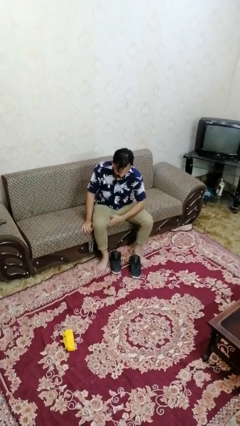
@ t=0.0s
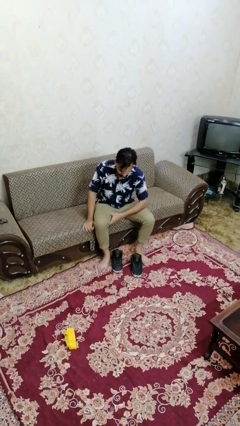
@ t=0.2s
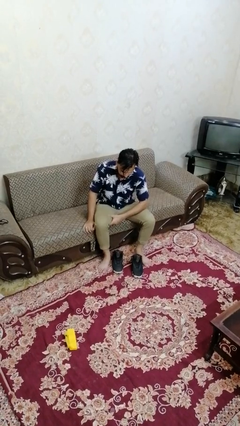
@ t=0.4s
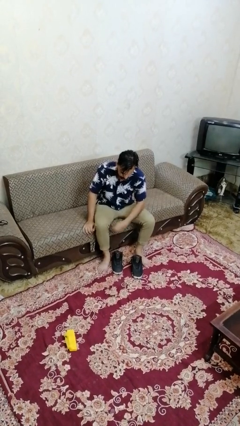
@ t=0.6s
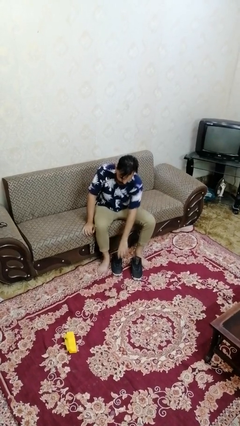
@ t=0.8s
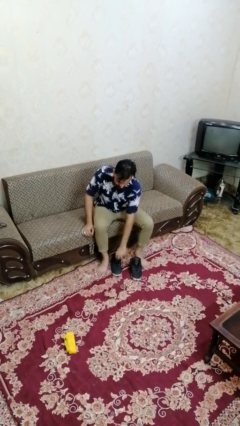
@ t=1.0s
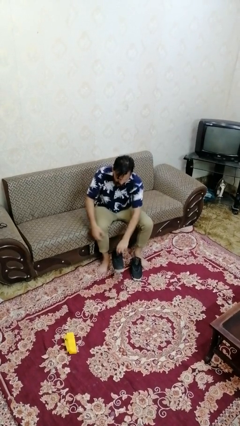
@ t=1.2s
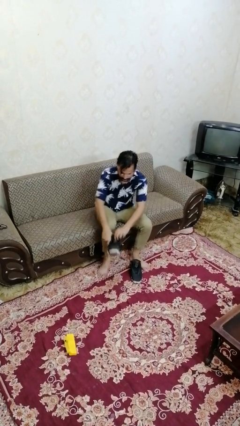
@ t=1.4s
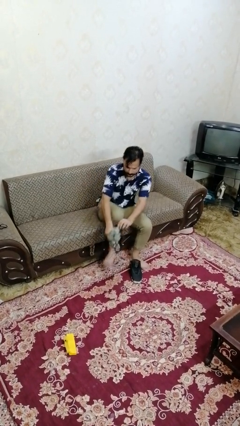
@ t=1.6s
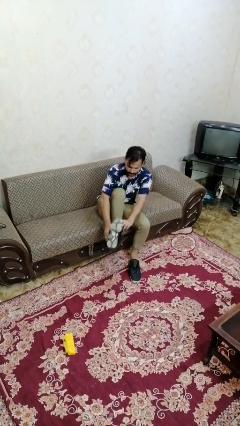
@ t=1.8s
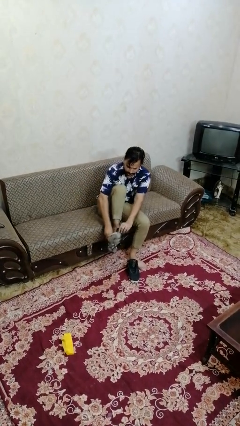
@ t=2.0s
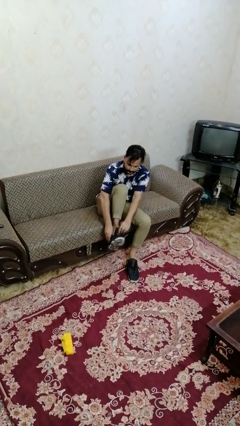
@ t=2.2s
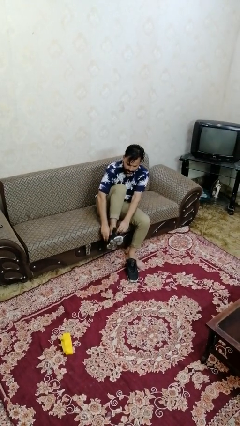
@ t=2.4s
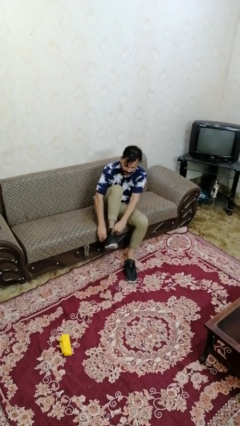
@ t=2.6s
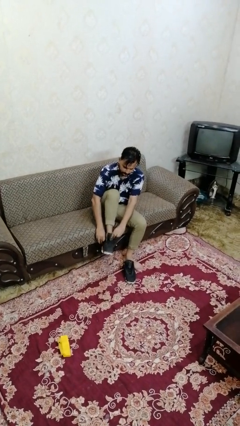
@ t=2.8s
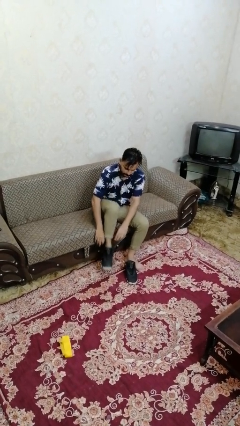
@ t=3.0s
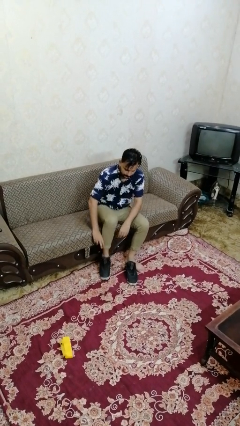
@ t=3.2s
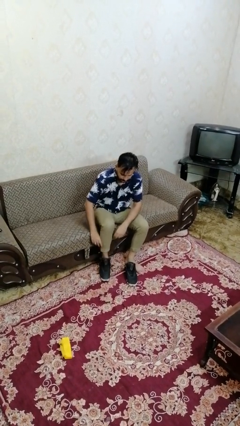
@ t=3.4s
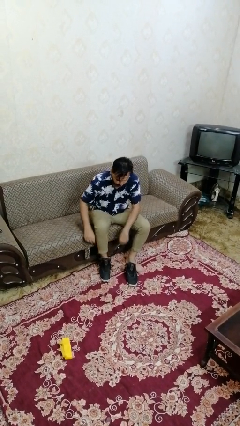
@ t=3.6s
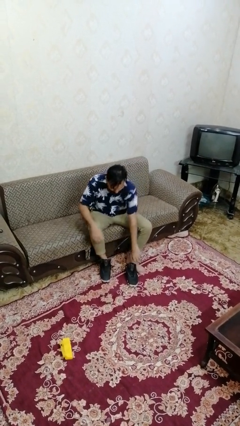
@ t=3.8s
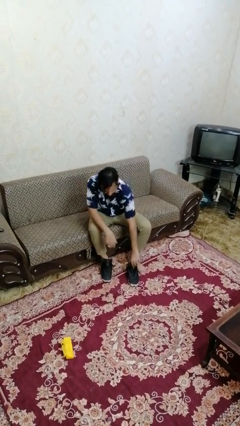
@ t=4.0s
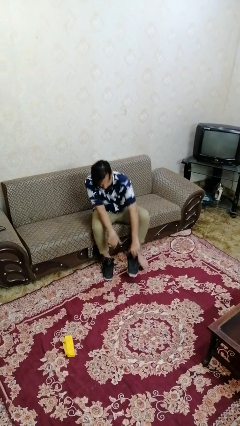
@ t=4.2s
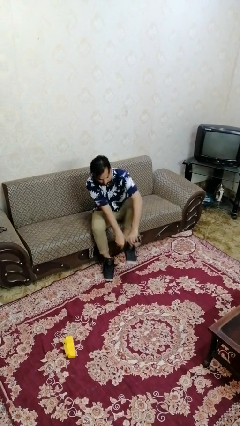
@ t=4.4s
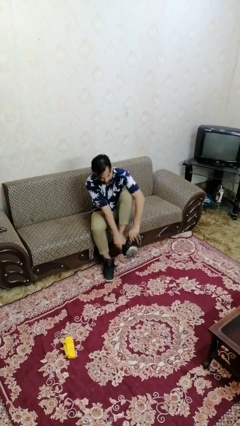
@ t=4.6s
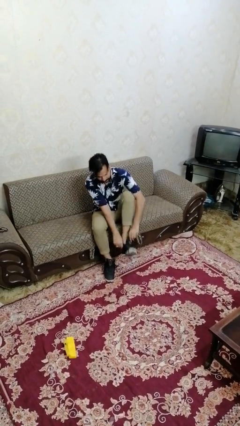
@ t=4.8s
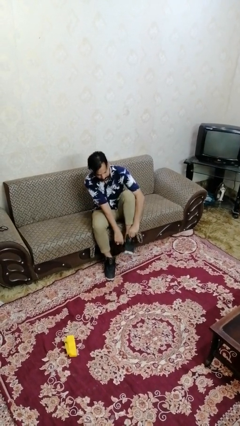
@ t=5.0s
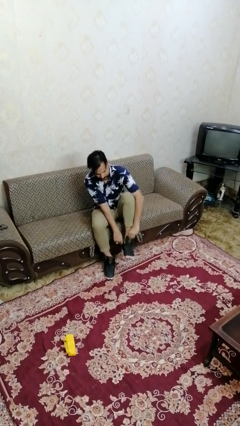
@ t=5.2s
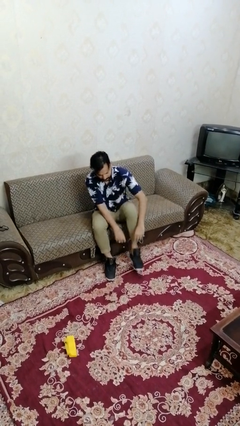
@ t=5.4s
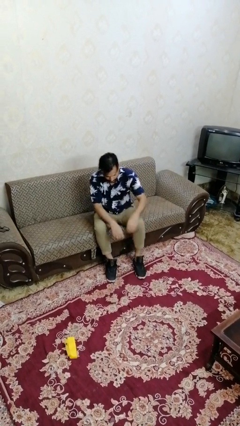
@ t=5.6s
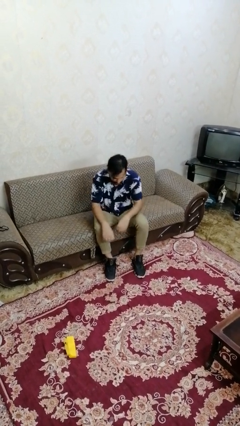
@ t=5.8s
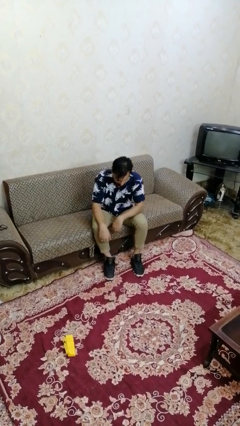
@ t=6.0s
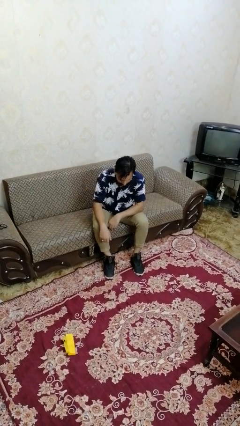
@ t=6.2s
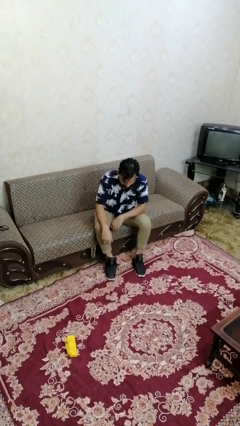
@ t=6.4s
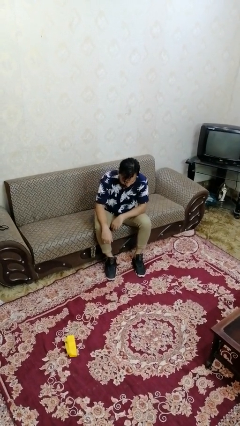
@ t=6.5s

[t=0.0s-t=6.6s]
person puts on shoes

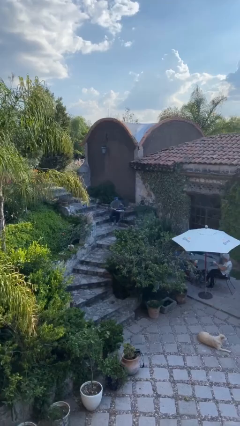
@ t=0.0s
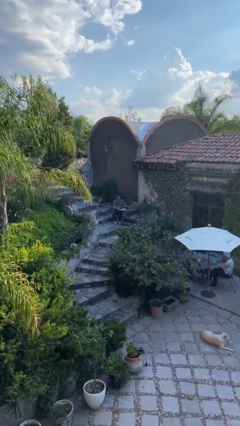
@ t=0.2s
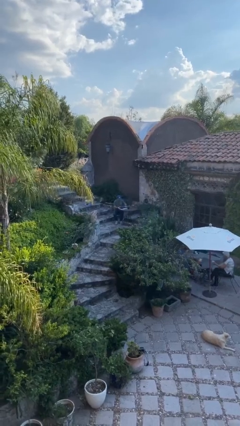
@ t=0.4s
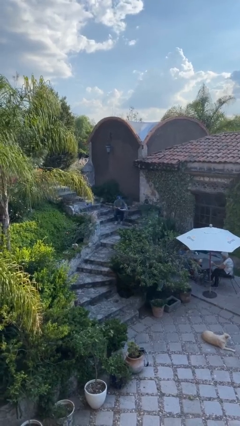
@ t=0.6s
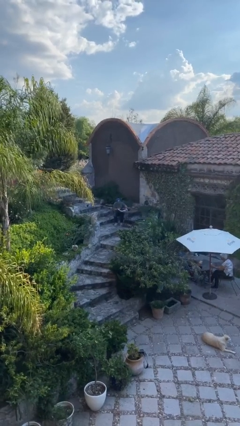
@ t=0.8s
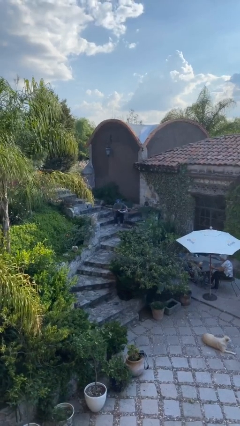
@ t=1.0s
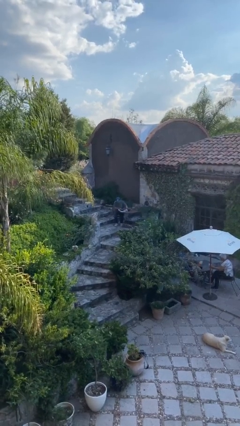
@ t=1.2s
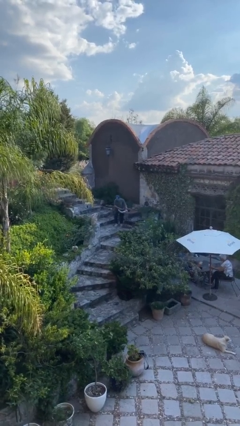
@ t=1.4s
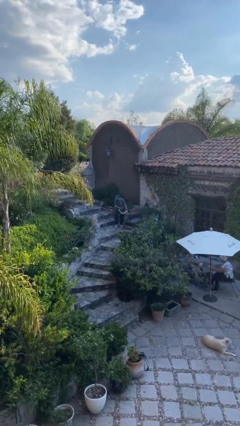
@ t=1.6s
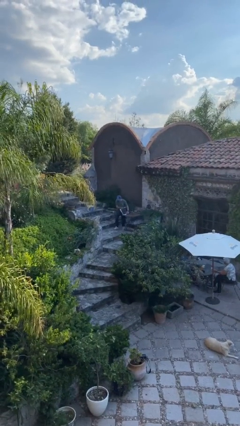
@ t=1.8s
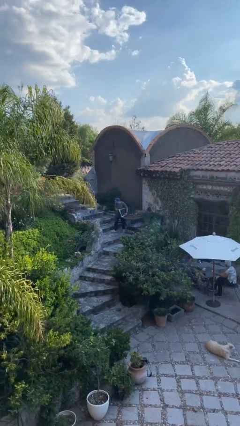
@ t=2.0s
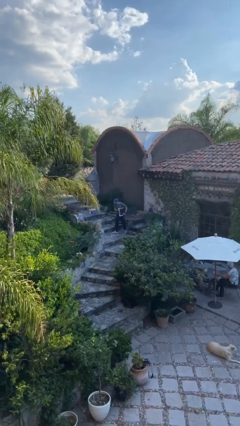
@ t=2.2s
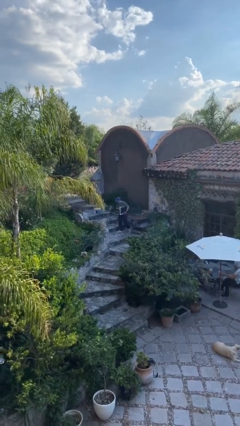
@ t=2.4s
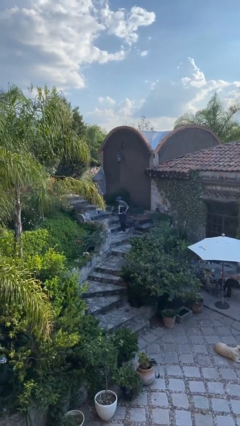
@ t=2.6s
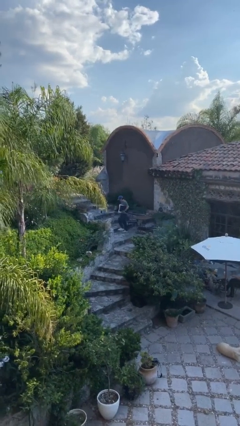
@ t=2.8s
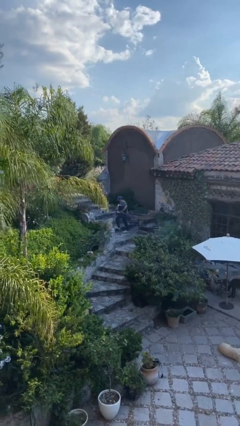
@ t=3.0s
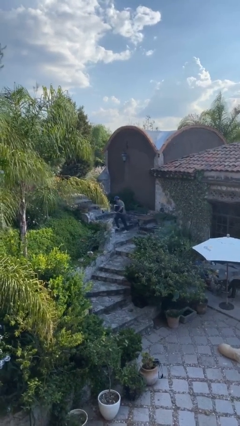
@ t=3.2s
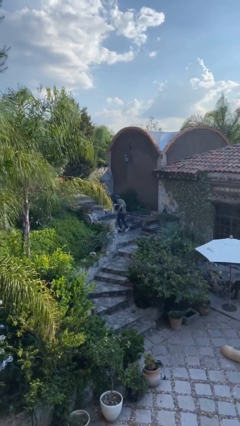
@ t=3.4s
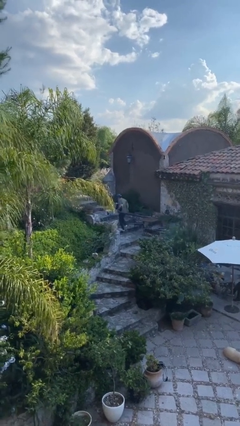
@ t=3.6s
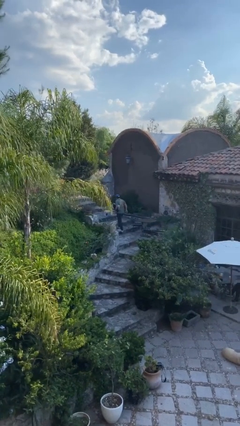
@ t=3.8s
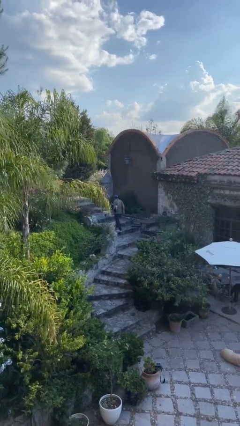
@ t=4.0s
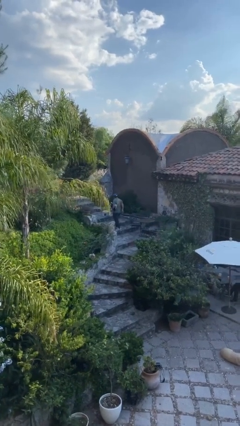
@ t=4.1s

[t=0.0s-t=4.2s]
person stands up

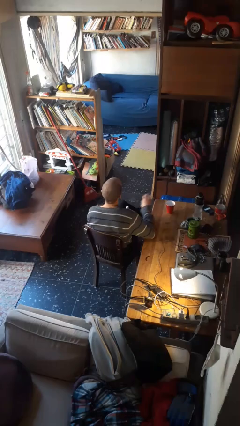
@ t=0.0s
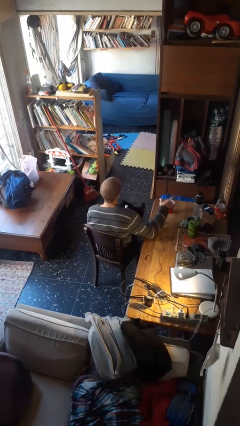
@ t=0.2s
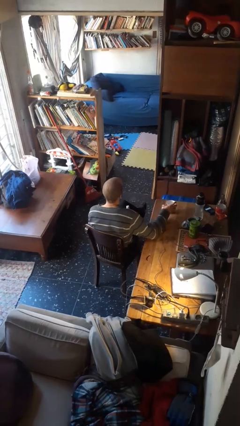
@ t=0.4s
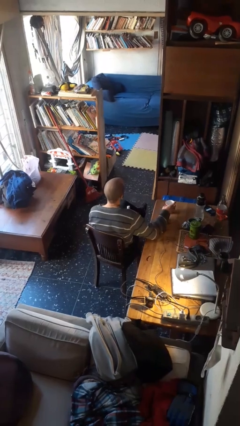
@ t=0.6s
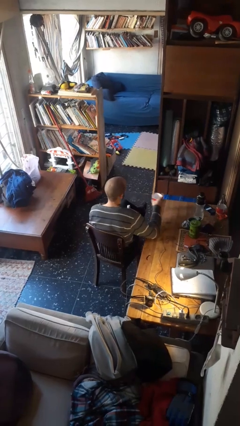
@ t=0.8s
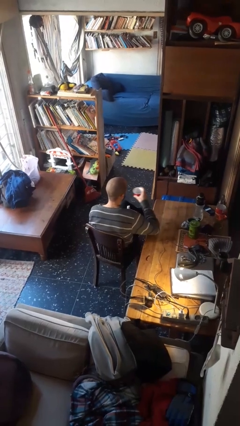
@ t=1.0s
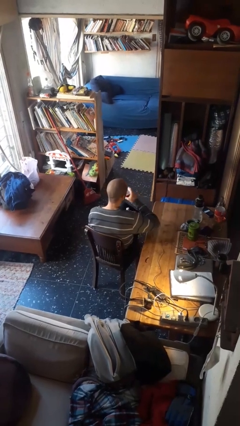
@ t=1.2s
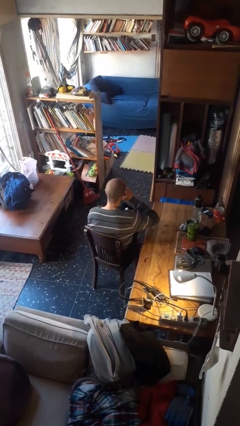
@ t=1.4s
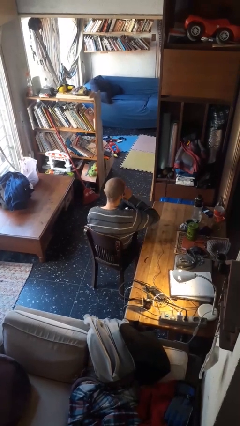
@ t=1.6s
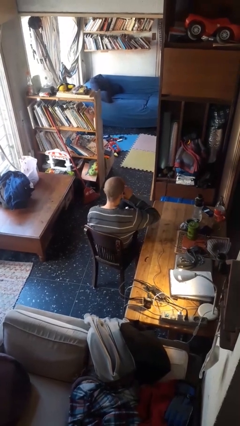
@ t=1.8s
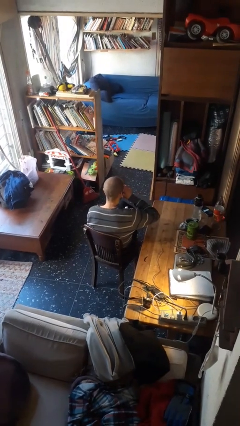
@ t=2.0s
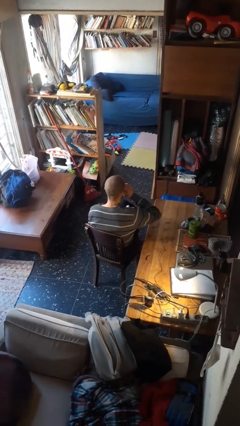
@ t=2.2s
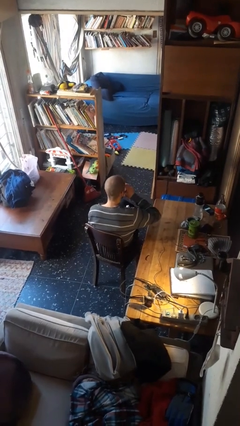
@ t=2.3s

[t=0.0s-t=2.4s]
person drinks from cup

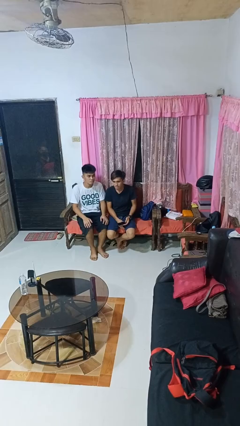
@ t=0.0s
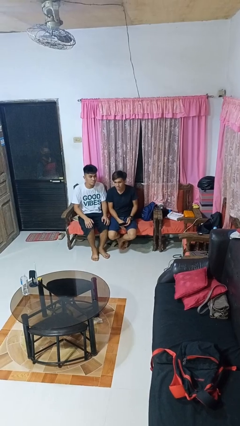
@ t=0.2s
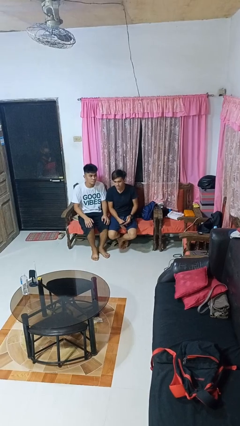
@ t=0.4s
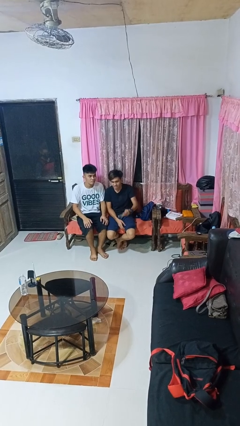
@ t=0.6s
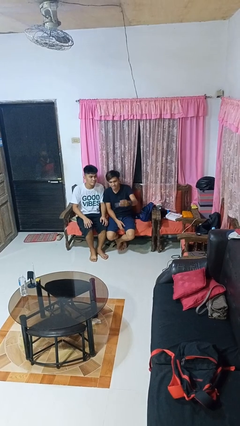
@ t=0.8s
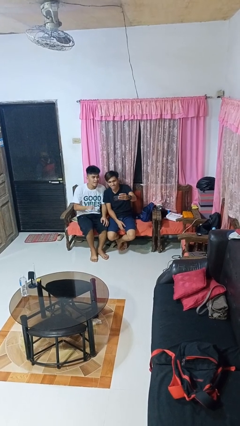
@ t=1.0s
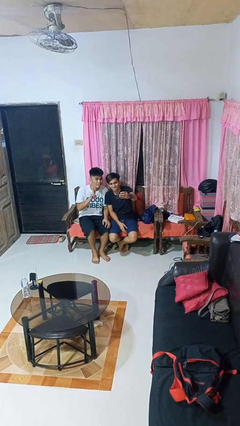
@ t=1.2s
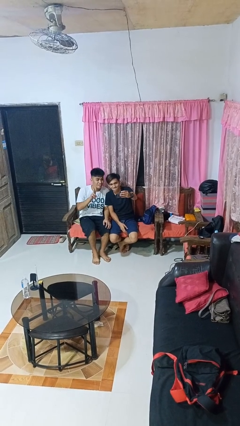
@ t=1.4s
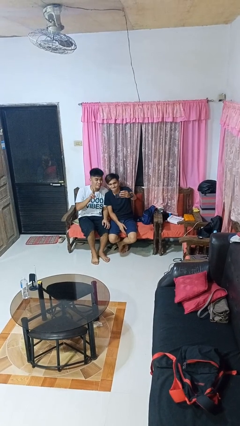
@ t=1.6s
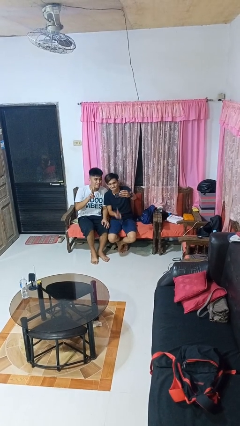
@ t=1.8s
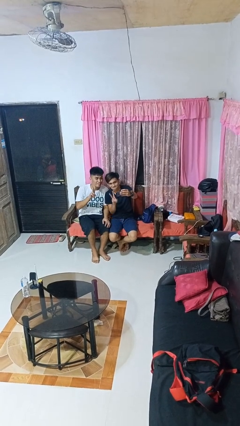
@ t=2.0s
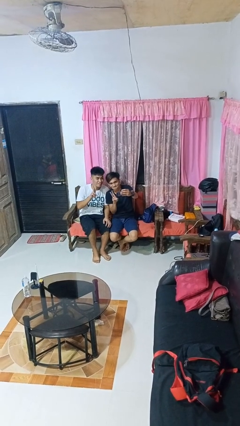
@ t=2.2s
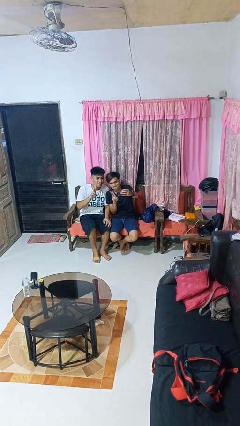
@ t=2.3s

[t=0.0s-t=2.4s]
person takes selfie with person

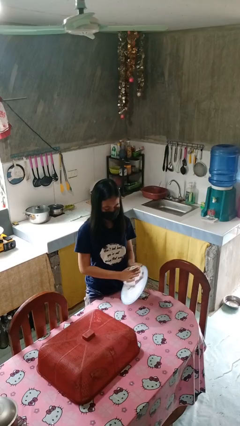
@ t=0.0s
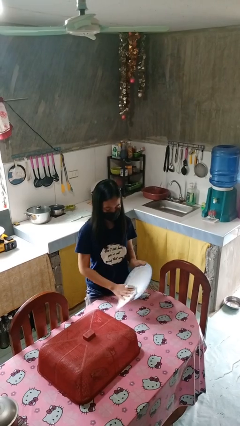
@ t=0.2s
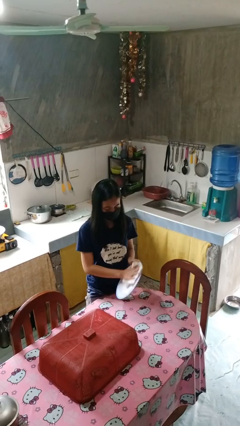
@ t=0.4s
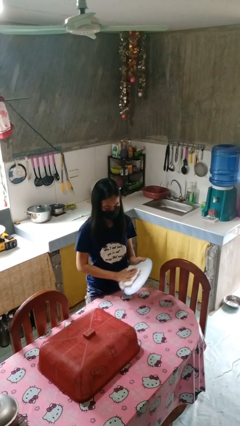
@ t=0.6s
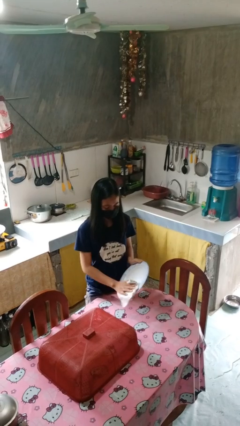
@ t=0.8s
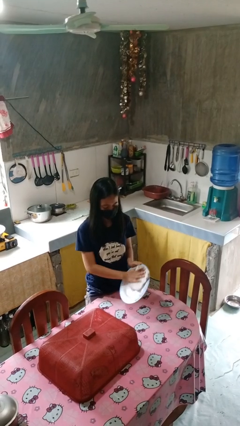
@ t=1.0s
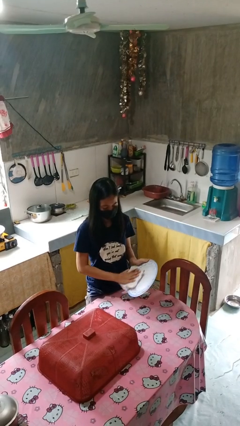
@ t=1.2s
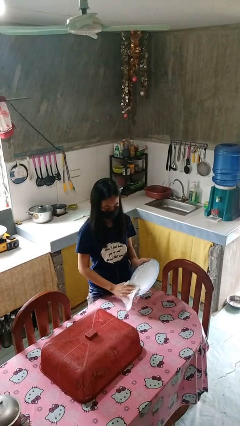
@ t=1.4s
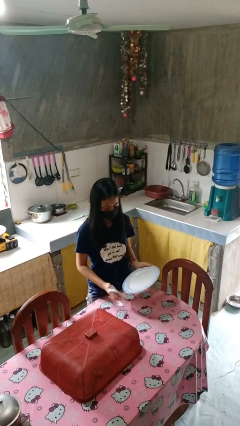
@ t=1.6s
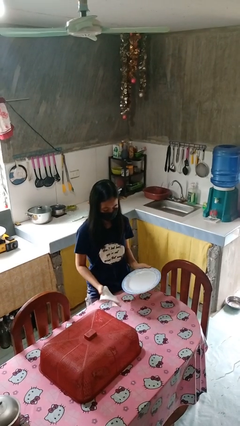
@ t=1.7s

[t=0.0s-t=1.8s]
person dries dish
